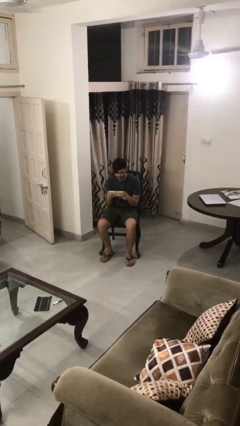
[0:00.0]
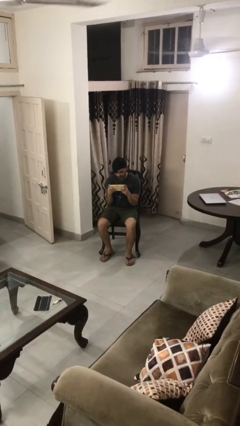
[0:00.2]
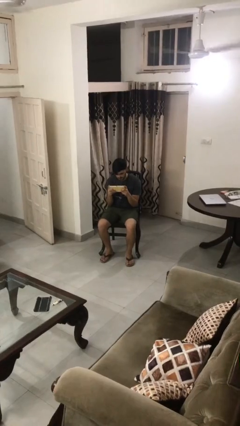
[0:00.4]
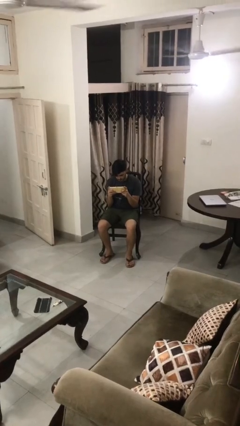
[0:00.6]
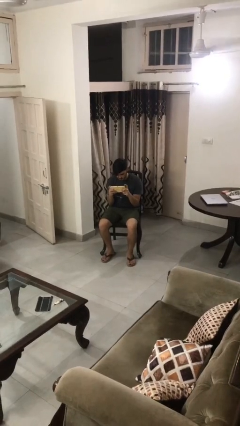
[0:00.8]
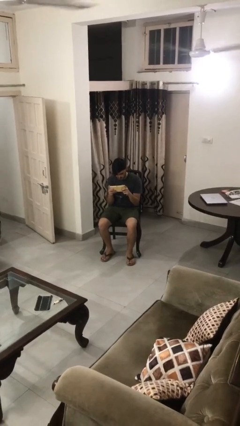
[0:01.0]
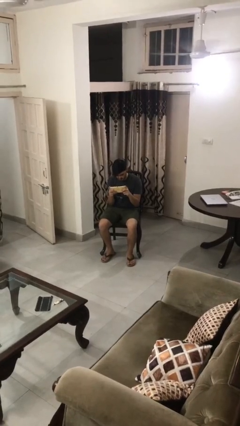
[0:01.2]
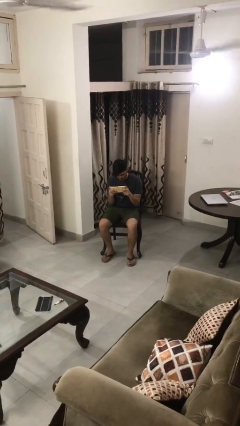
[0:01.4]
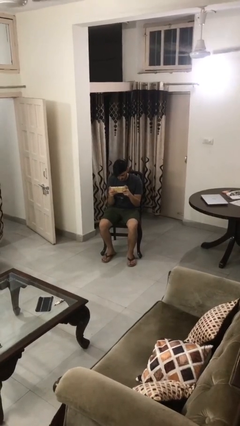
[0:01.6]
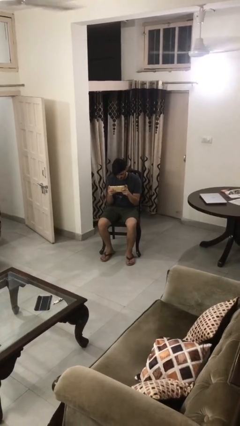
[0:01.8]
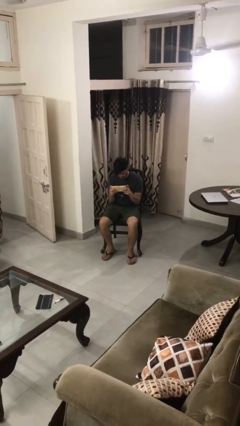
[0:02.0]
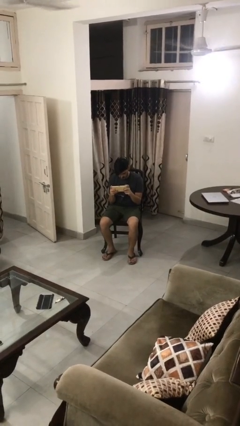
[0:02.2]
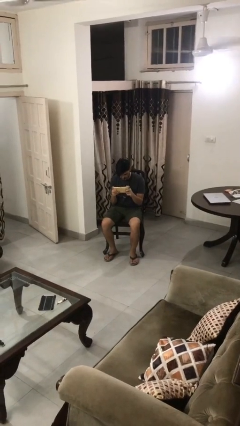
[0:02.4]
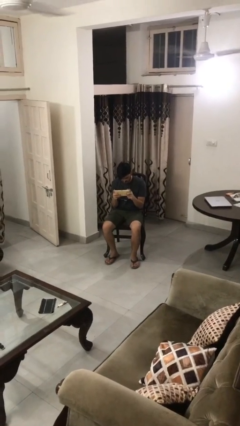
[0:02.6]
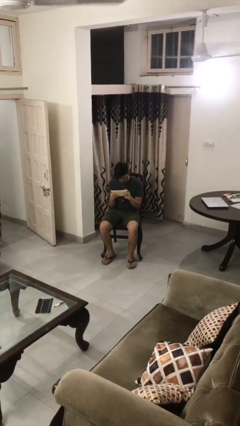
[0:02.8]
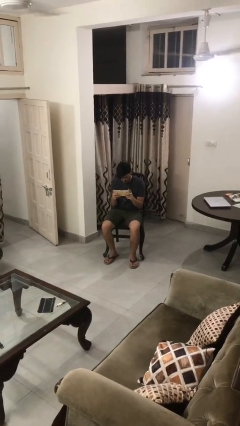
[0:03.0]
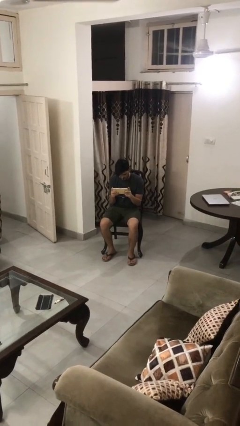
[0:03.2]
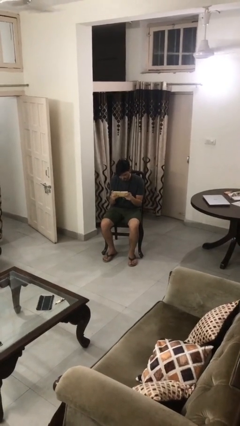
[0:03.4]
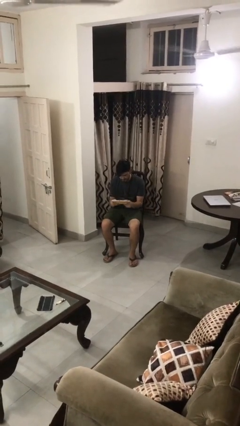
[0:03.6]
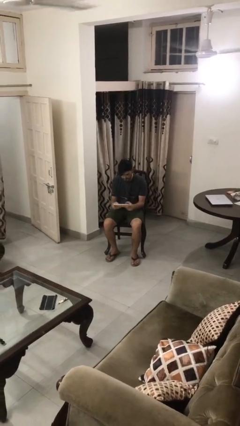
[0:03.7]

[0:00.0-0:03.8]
person interacts with handheld game

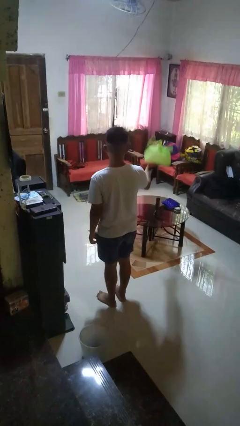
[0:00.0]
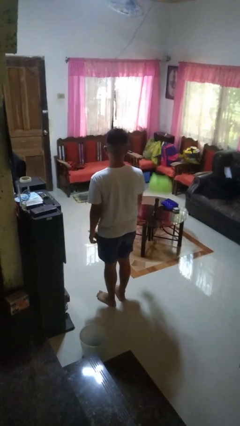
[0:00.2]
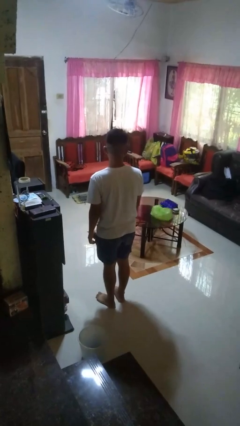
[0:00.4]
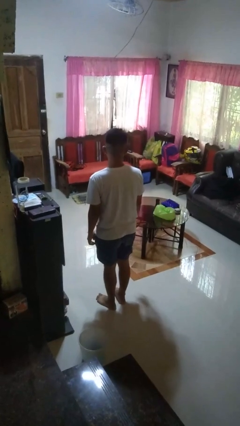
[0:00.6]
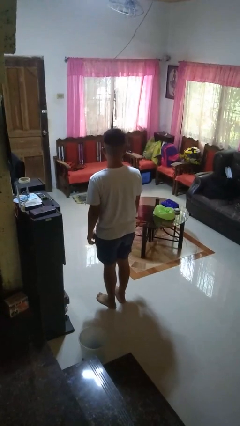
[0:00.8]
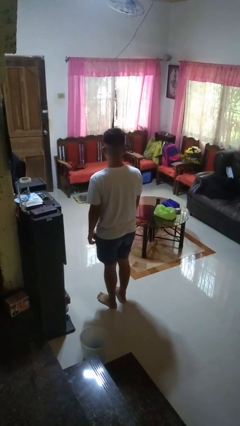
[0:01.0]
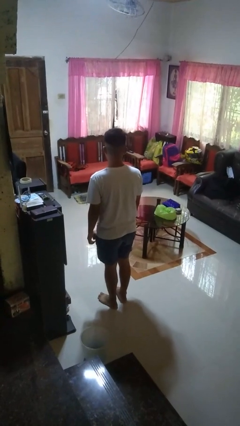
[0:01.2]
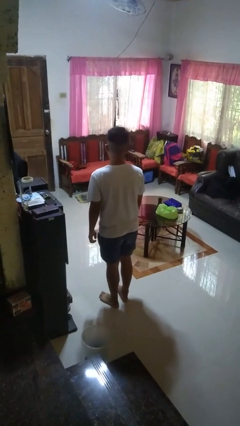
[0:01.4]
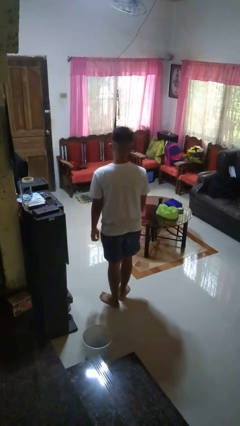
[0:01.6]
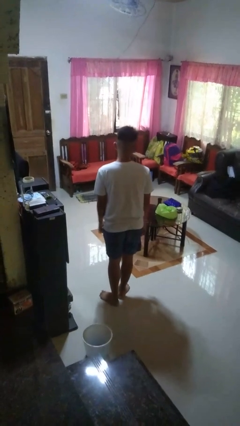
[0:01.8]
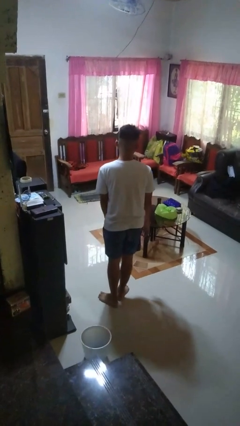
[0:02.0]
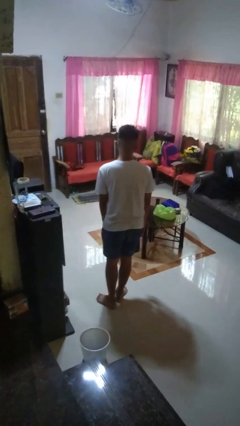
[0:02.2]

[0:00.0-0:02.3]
person throws object on table

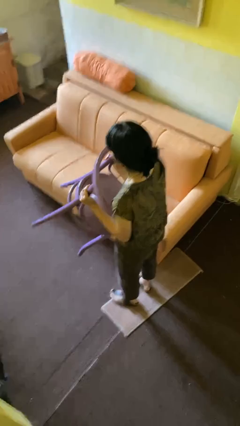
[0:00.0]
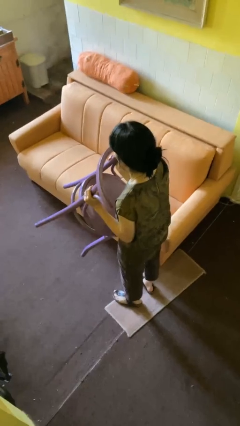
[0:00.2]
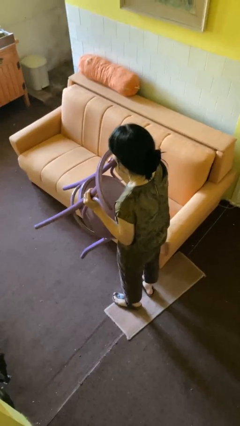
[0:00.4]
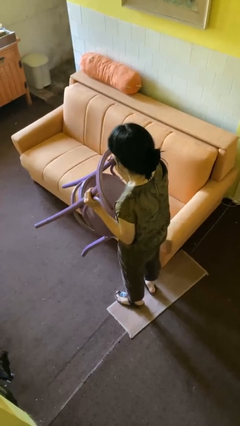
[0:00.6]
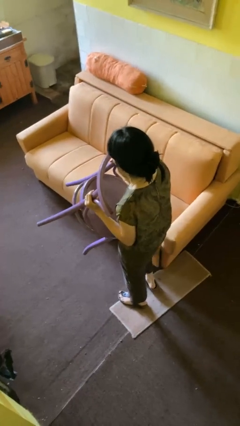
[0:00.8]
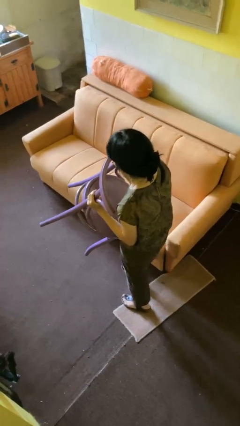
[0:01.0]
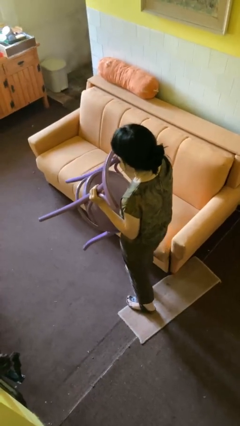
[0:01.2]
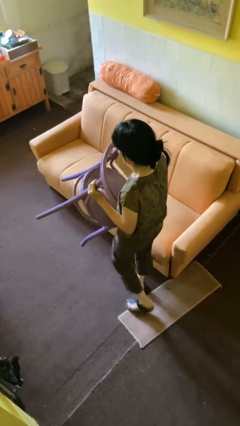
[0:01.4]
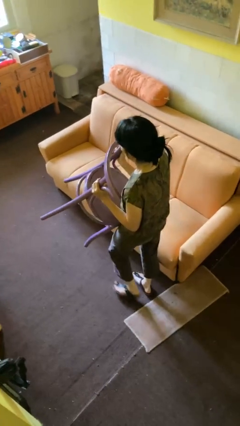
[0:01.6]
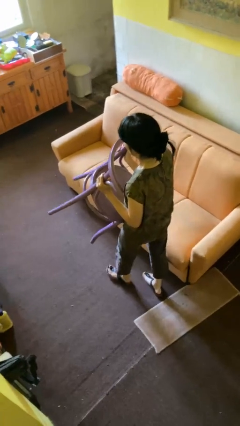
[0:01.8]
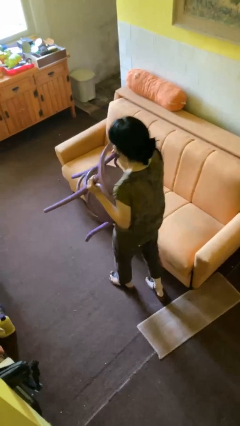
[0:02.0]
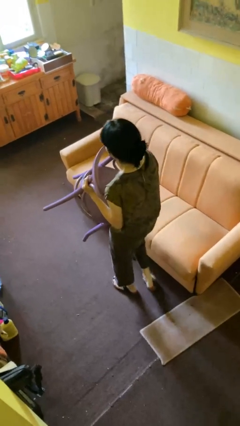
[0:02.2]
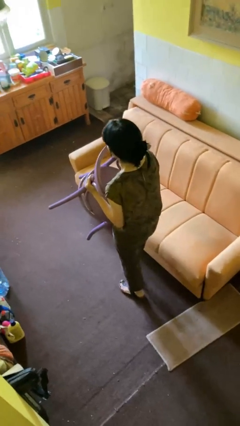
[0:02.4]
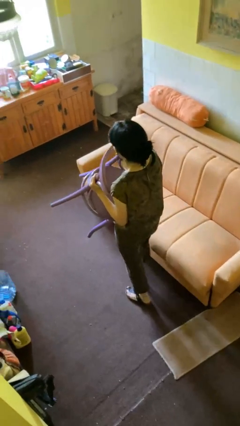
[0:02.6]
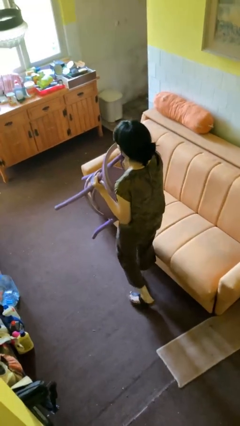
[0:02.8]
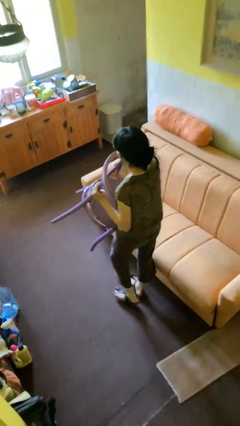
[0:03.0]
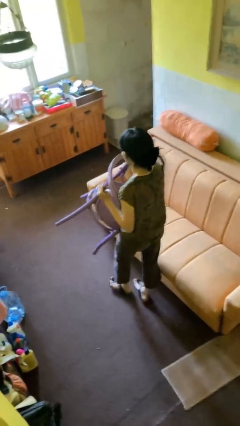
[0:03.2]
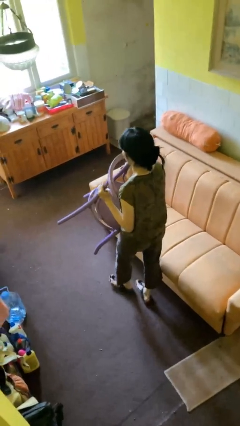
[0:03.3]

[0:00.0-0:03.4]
person carries furniture

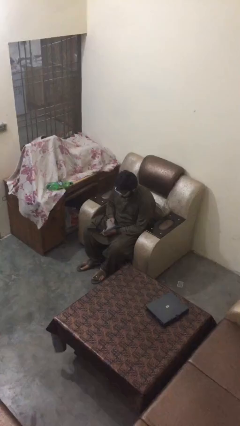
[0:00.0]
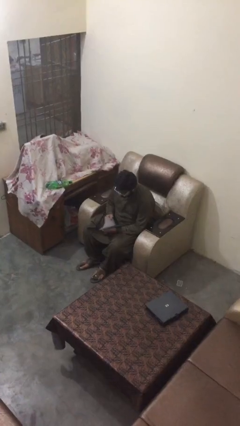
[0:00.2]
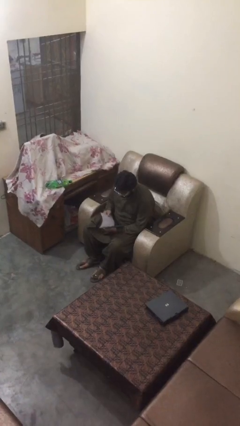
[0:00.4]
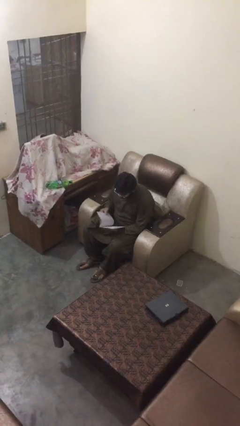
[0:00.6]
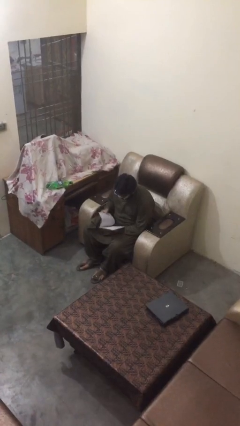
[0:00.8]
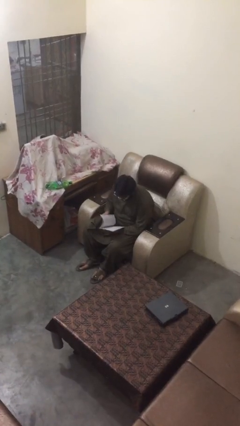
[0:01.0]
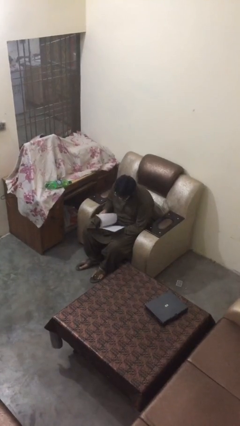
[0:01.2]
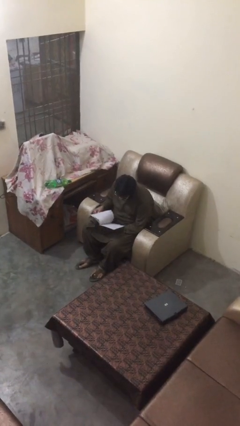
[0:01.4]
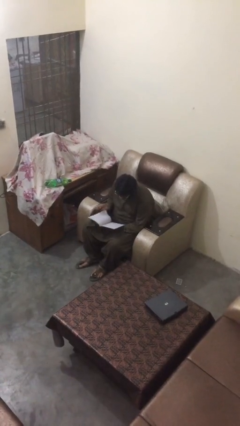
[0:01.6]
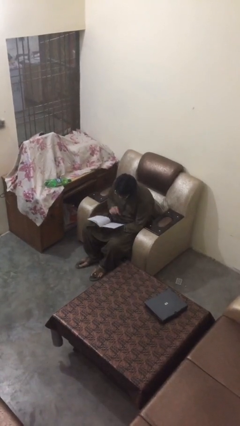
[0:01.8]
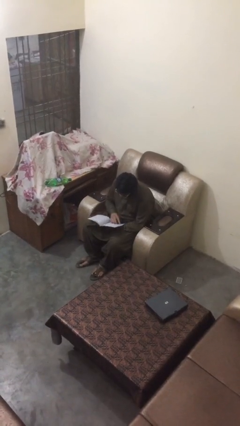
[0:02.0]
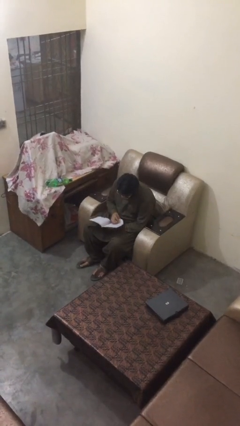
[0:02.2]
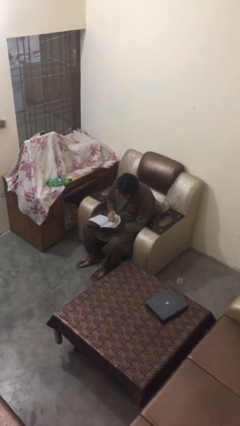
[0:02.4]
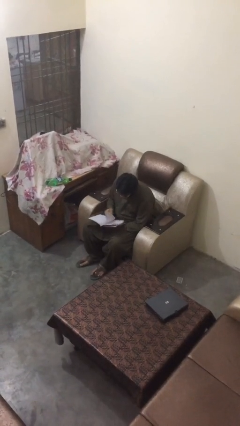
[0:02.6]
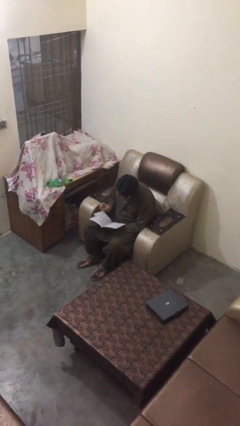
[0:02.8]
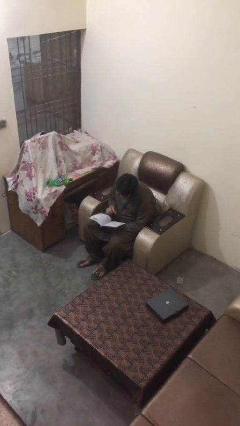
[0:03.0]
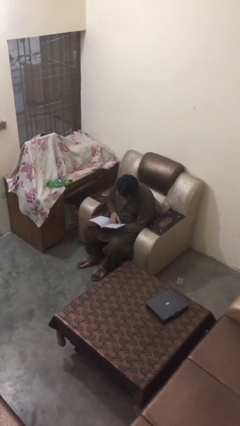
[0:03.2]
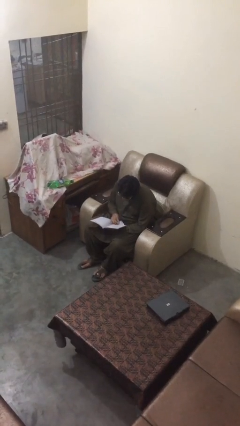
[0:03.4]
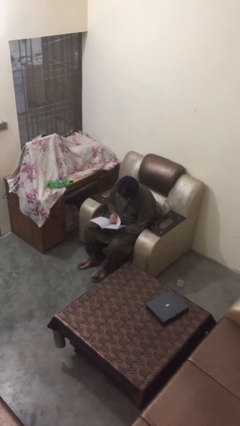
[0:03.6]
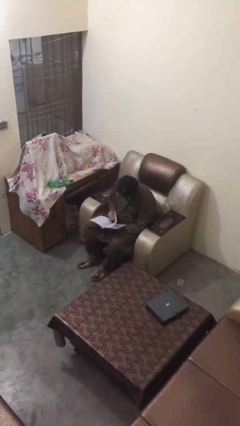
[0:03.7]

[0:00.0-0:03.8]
person reads document

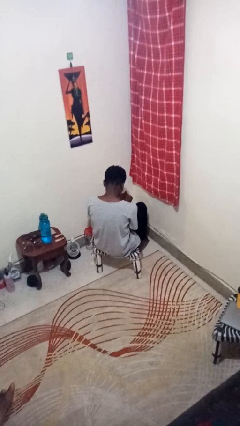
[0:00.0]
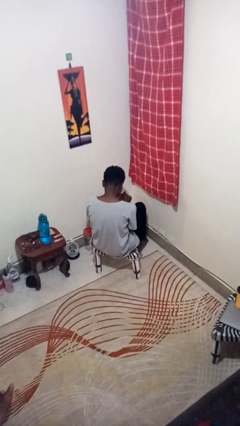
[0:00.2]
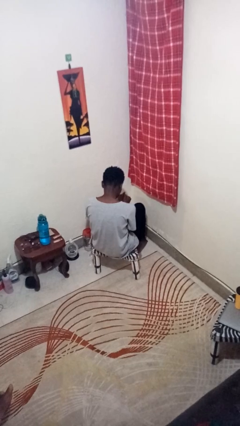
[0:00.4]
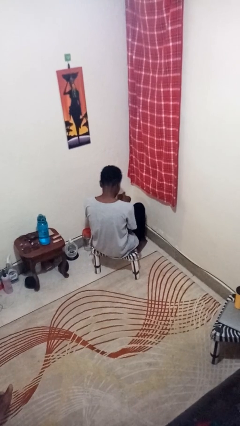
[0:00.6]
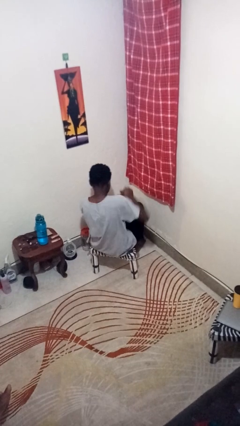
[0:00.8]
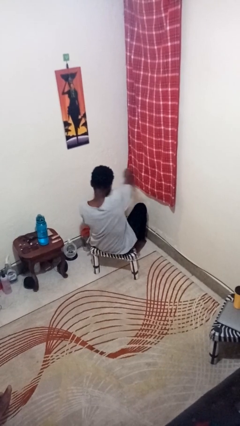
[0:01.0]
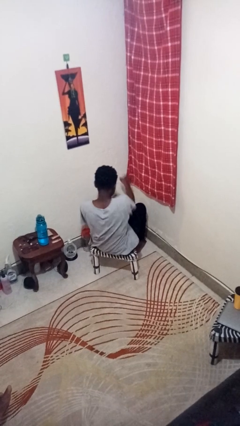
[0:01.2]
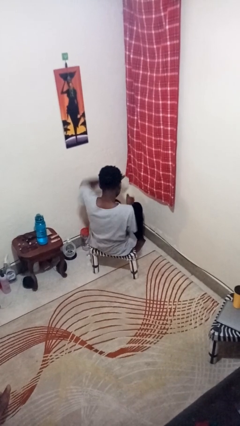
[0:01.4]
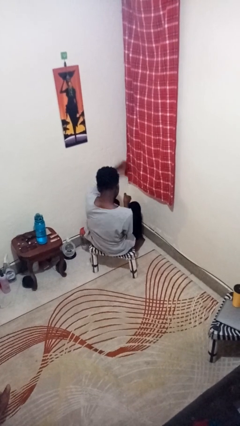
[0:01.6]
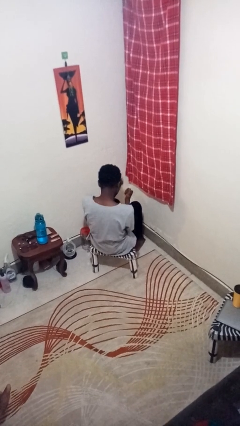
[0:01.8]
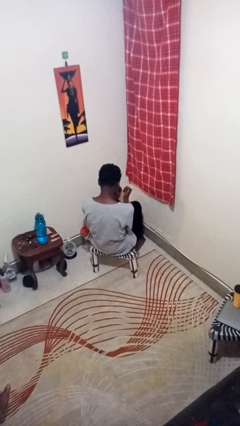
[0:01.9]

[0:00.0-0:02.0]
person punches

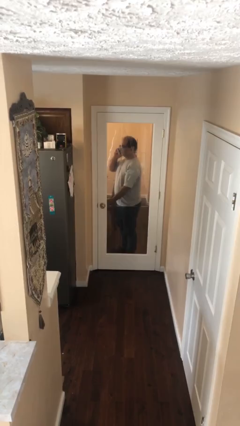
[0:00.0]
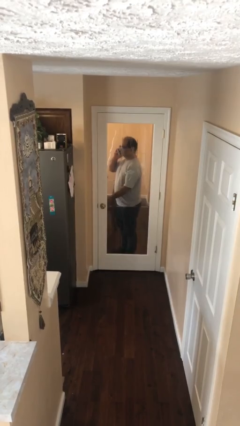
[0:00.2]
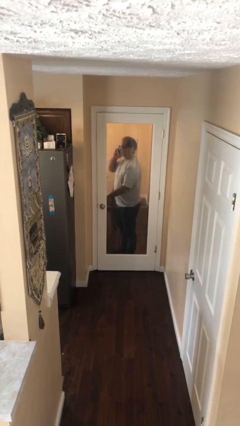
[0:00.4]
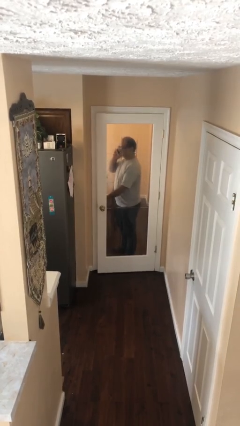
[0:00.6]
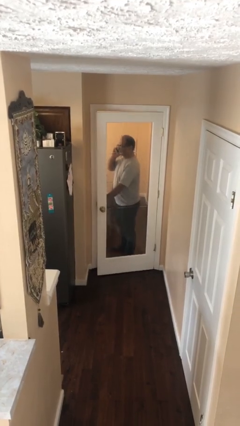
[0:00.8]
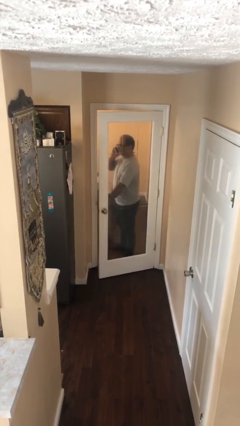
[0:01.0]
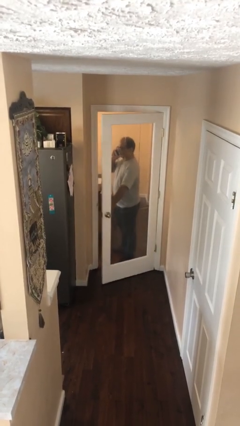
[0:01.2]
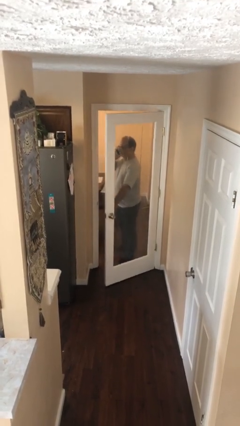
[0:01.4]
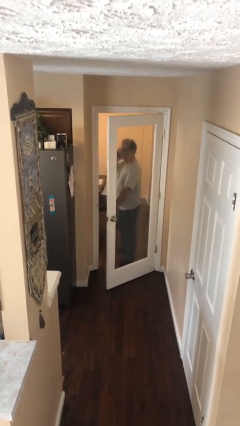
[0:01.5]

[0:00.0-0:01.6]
person opens facility door

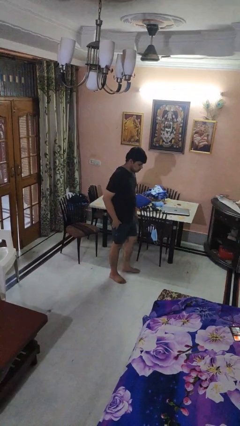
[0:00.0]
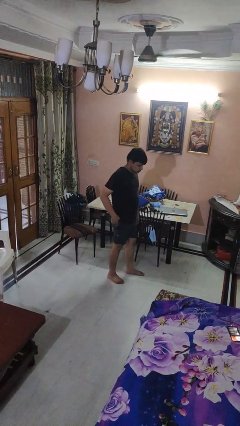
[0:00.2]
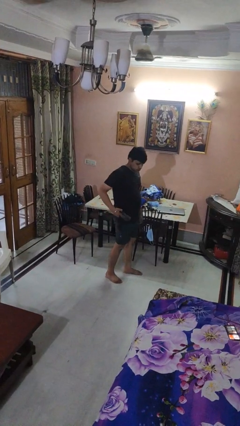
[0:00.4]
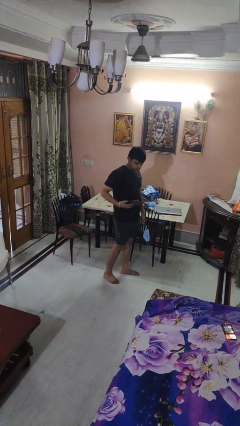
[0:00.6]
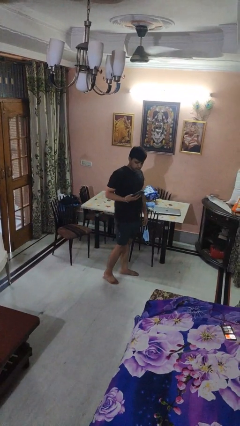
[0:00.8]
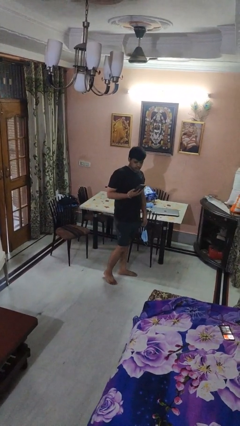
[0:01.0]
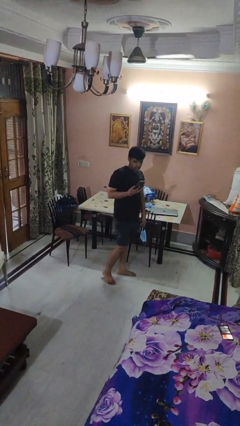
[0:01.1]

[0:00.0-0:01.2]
person takes phone from pocket
